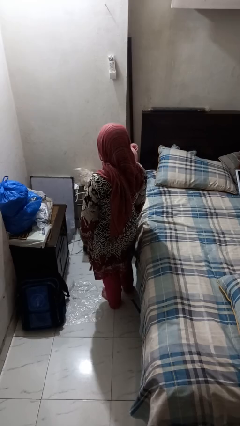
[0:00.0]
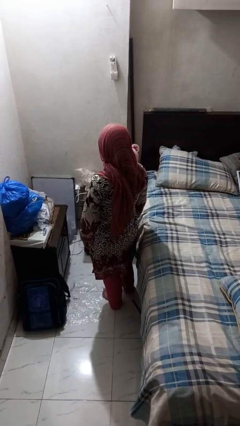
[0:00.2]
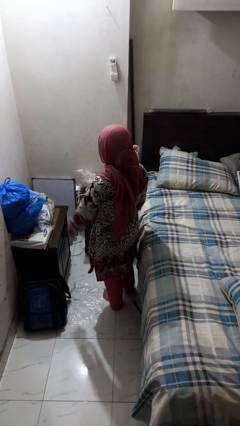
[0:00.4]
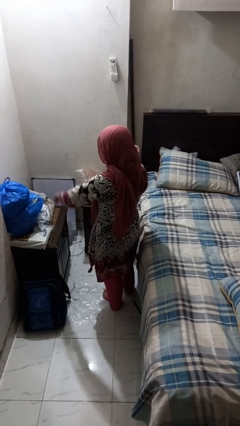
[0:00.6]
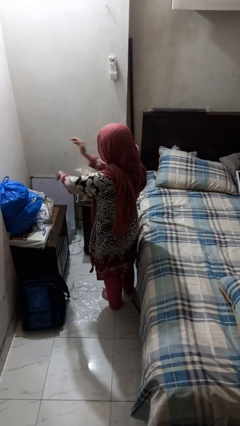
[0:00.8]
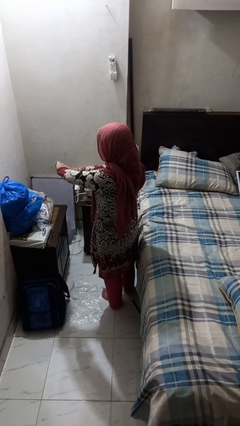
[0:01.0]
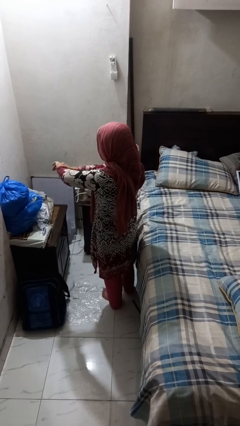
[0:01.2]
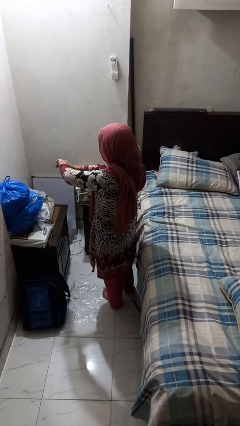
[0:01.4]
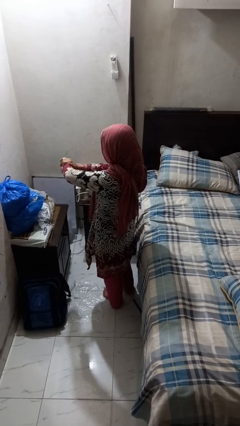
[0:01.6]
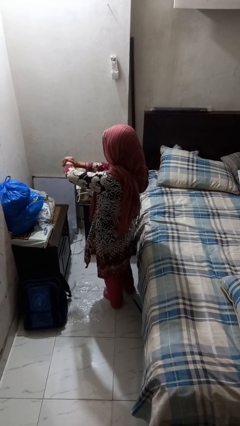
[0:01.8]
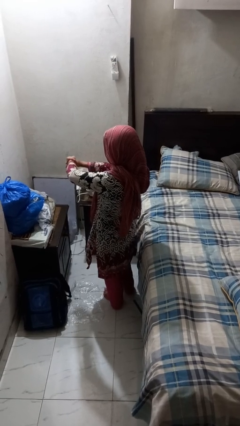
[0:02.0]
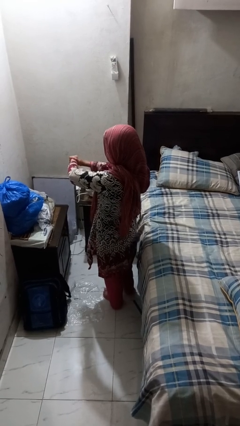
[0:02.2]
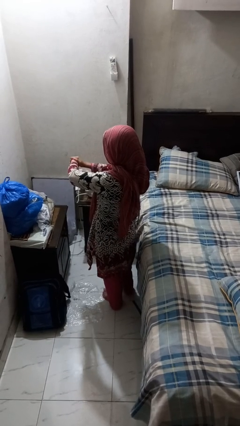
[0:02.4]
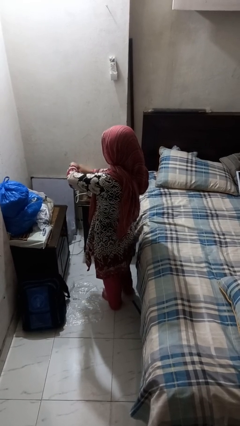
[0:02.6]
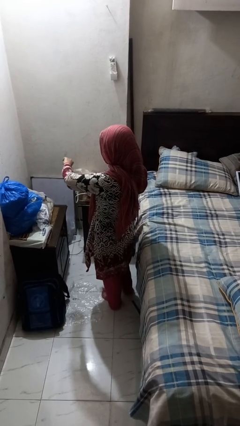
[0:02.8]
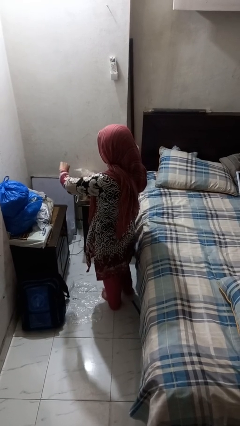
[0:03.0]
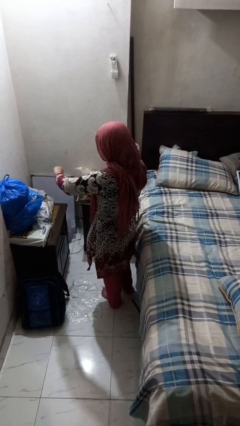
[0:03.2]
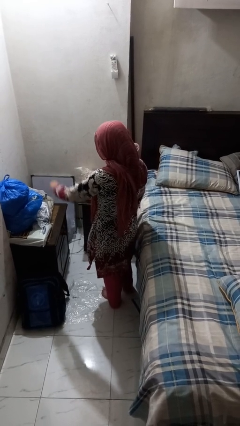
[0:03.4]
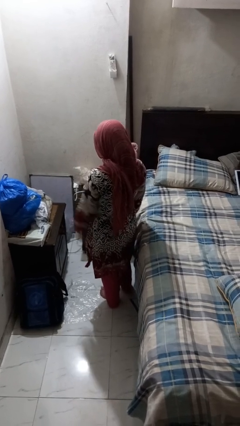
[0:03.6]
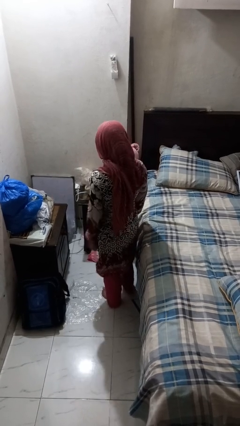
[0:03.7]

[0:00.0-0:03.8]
person swats bug

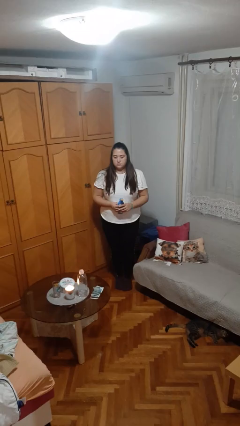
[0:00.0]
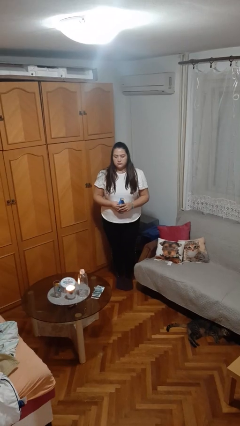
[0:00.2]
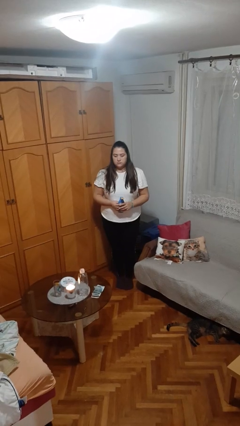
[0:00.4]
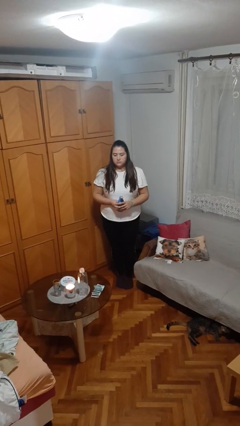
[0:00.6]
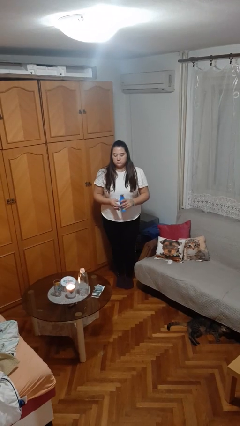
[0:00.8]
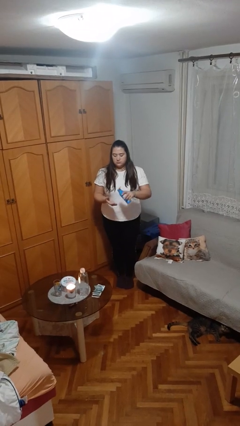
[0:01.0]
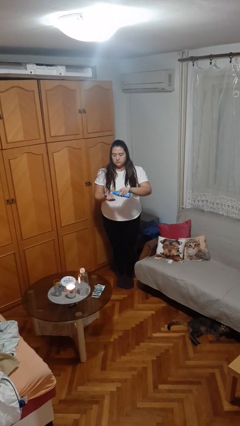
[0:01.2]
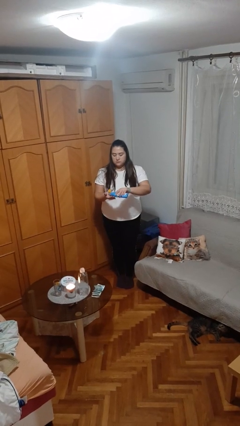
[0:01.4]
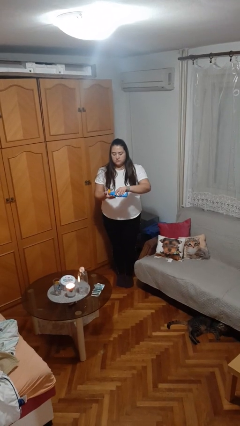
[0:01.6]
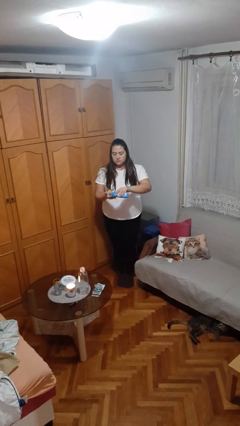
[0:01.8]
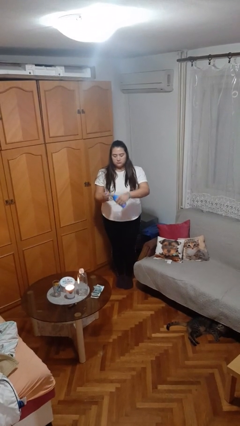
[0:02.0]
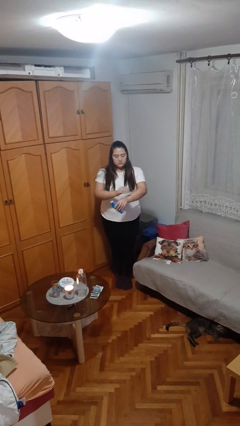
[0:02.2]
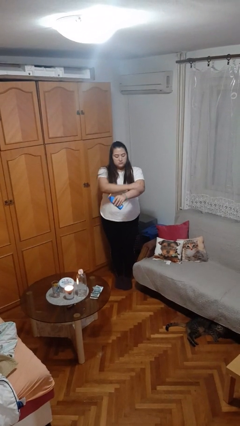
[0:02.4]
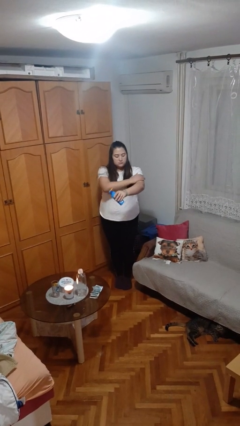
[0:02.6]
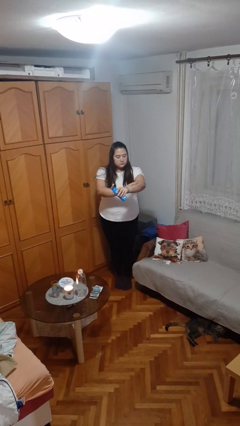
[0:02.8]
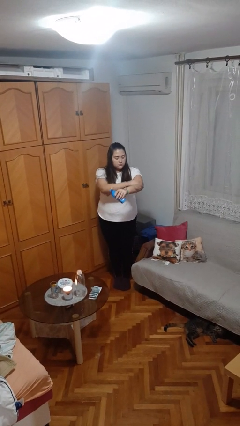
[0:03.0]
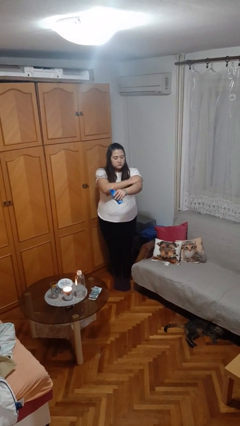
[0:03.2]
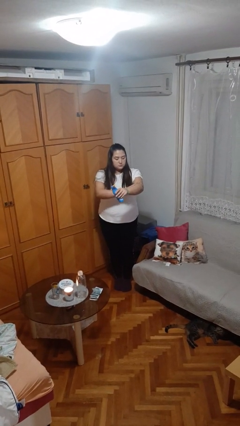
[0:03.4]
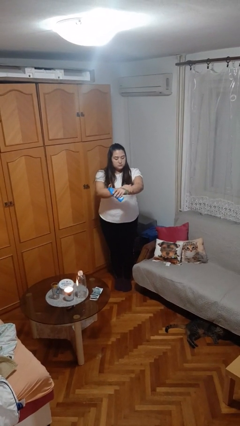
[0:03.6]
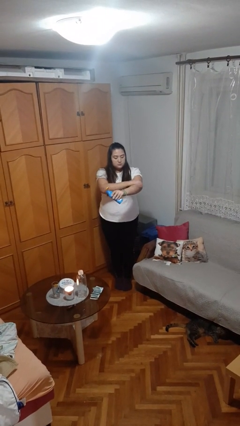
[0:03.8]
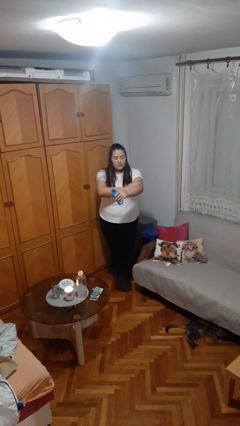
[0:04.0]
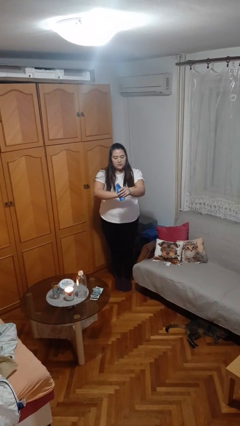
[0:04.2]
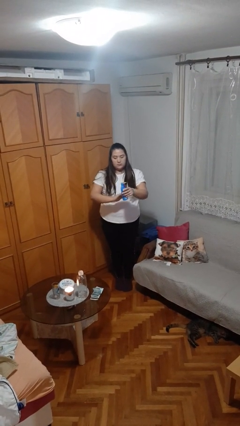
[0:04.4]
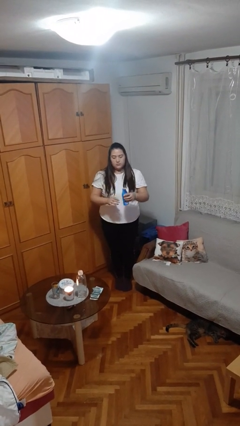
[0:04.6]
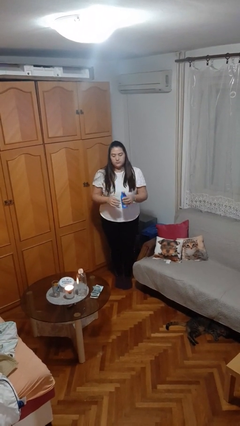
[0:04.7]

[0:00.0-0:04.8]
person applies sunscreen

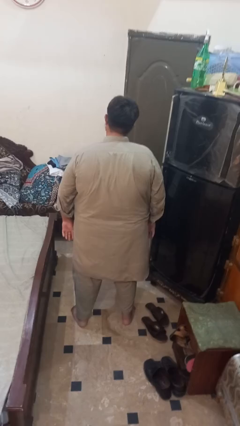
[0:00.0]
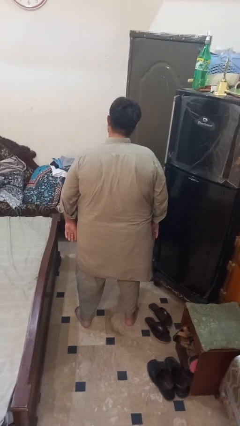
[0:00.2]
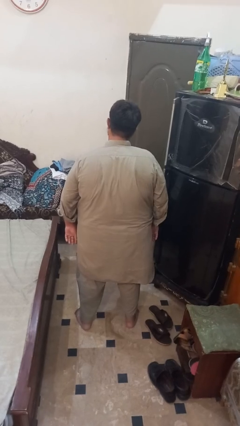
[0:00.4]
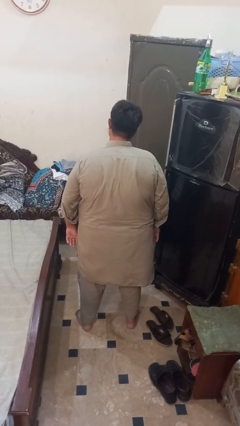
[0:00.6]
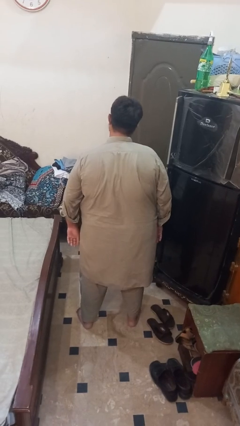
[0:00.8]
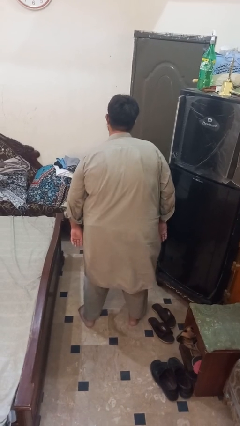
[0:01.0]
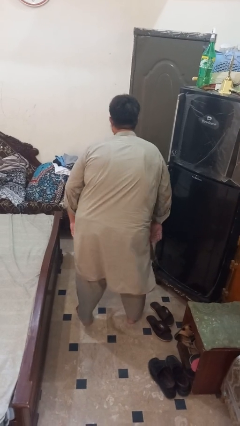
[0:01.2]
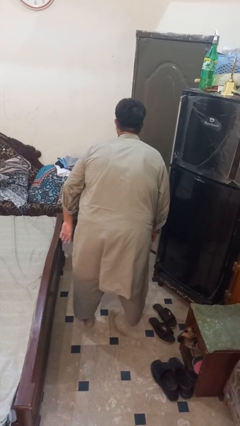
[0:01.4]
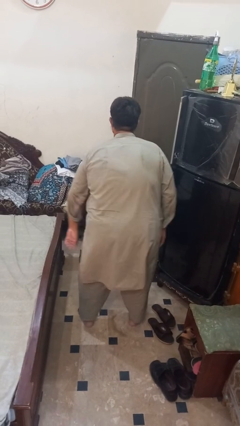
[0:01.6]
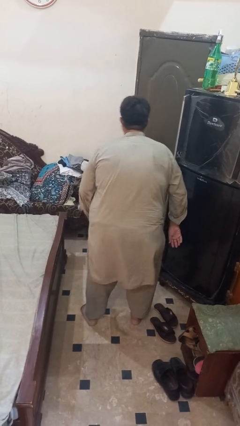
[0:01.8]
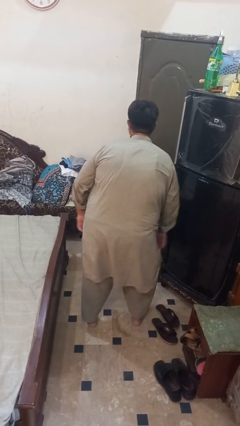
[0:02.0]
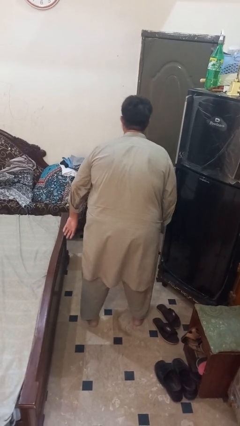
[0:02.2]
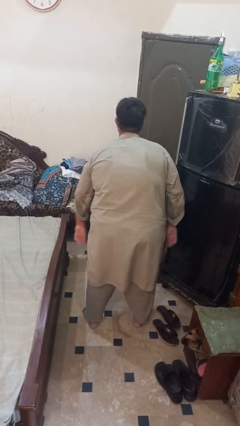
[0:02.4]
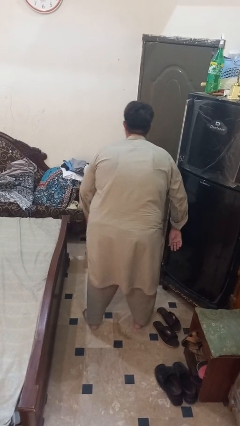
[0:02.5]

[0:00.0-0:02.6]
person wiggles hips

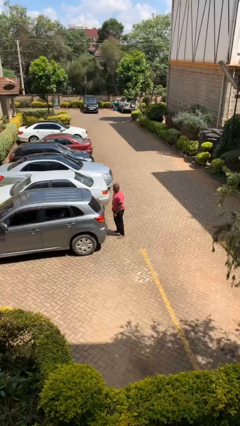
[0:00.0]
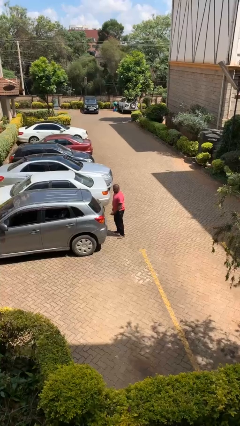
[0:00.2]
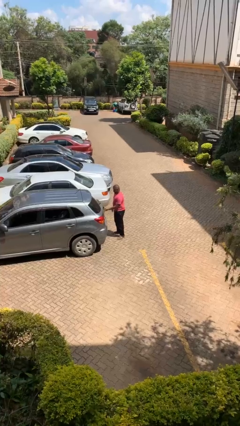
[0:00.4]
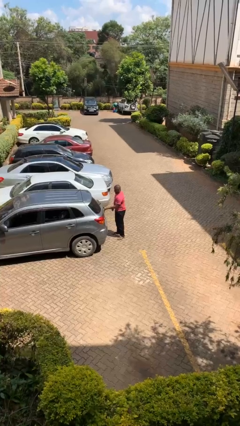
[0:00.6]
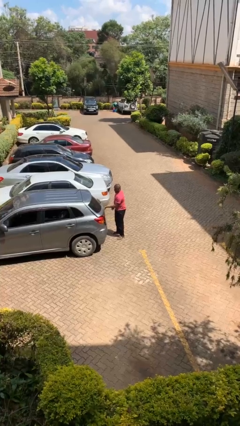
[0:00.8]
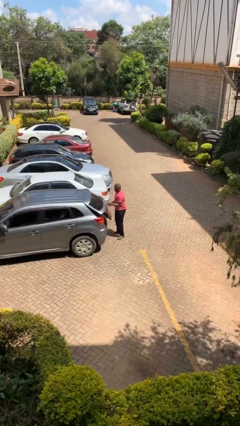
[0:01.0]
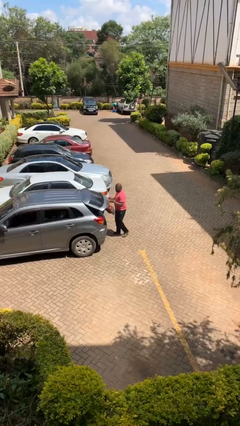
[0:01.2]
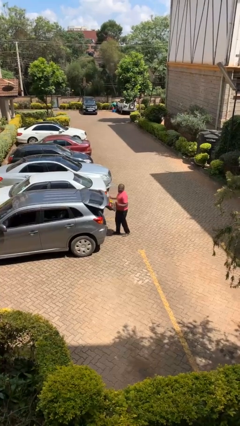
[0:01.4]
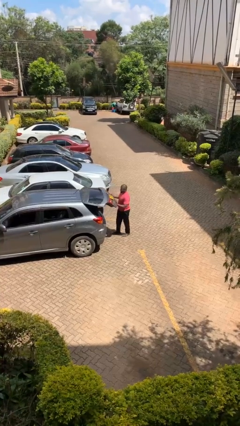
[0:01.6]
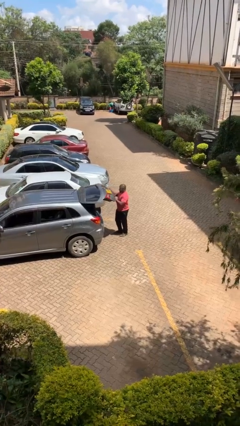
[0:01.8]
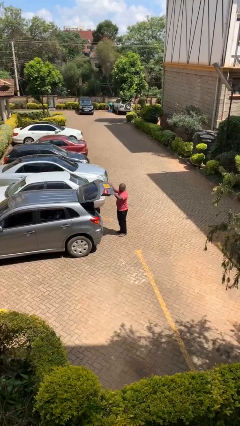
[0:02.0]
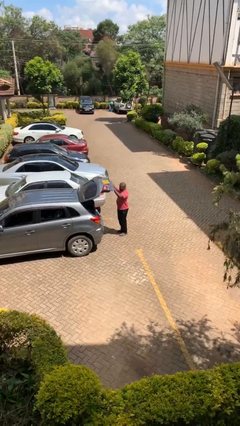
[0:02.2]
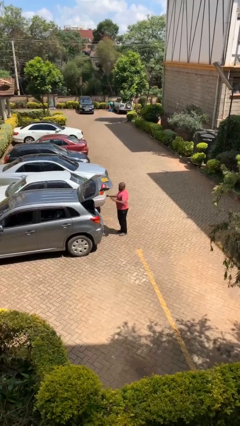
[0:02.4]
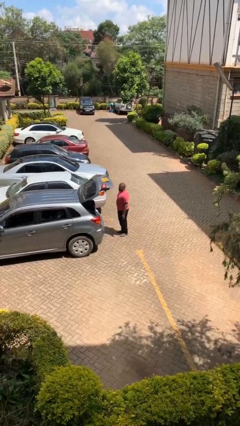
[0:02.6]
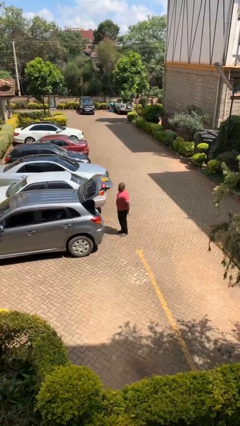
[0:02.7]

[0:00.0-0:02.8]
person opens car trunk

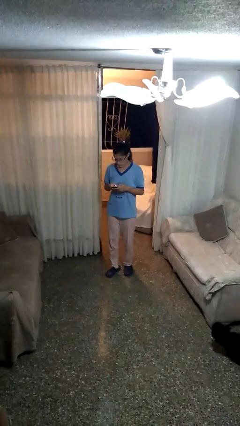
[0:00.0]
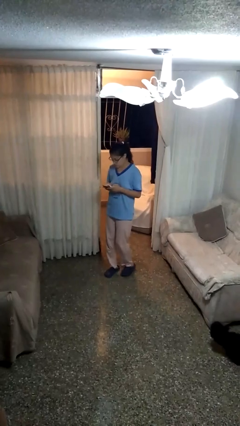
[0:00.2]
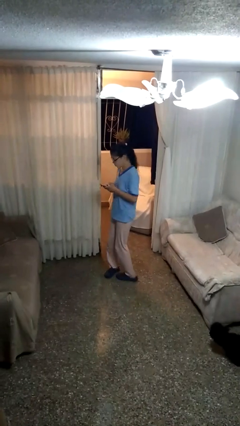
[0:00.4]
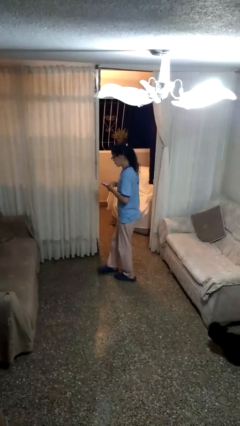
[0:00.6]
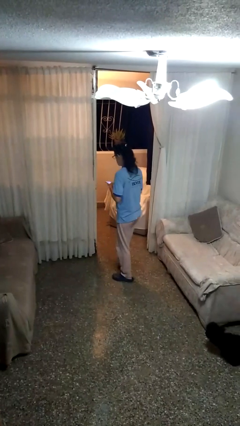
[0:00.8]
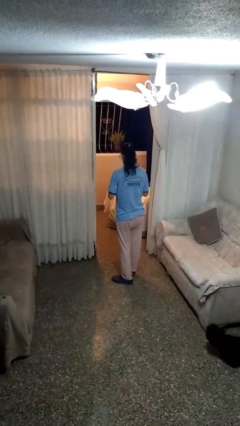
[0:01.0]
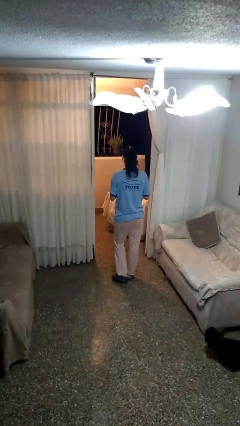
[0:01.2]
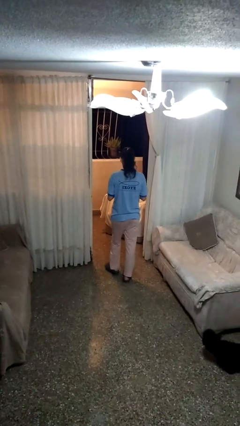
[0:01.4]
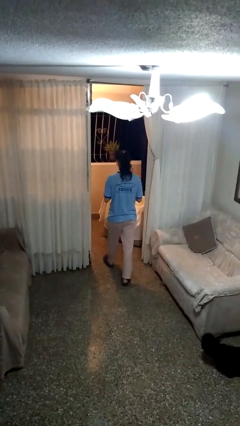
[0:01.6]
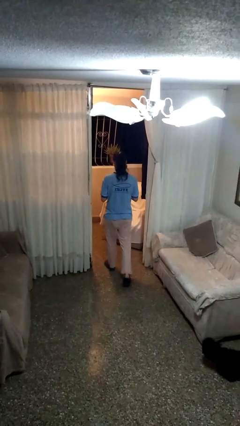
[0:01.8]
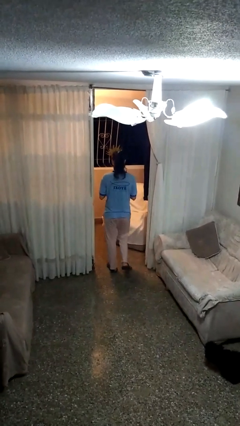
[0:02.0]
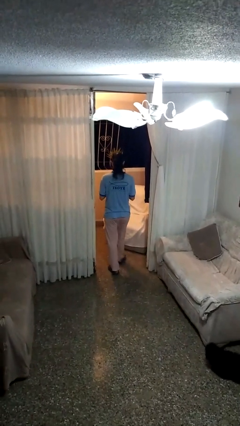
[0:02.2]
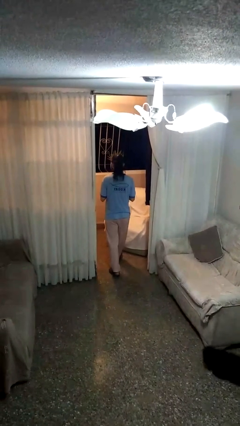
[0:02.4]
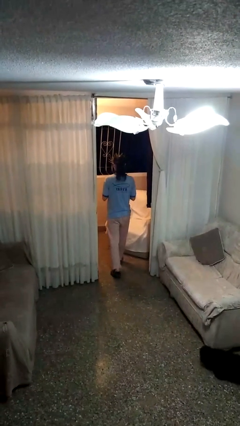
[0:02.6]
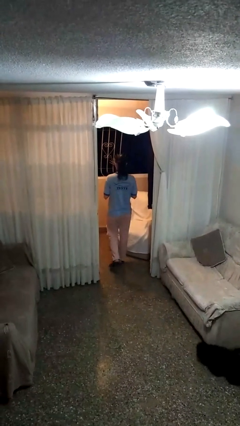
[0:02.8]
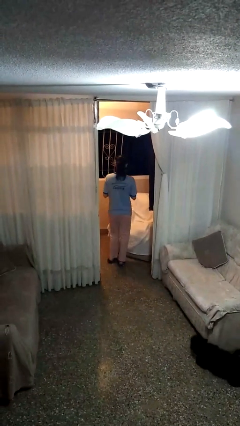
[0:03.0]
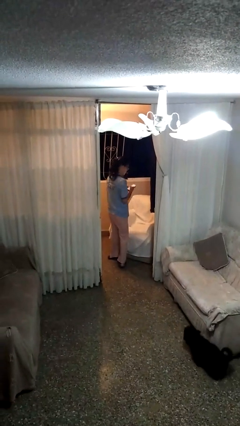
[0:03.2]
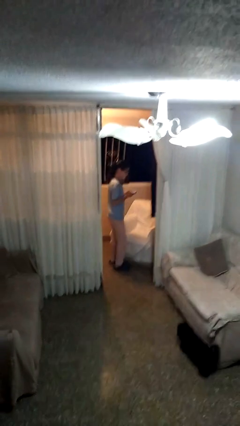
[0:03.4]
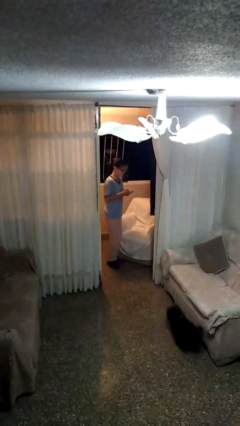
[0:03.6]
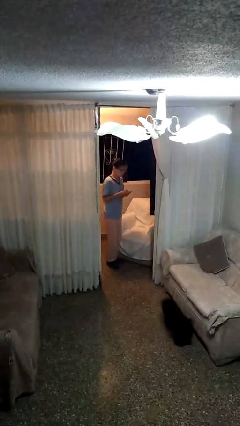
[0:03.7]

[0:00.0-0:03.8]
person exits scene through structure
